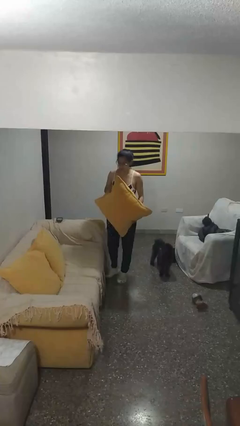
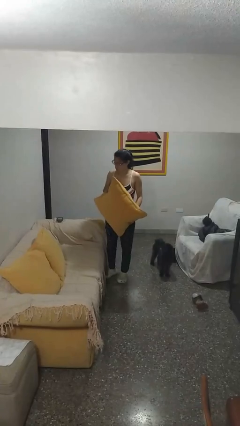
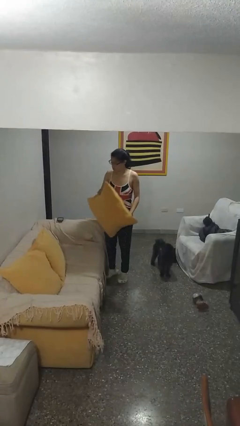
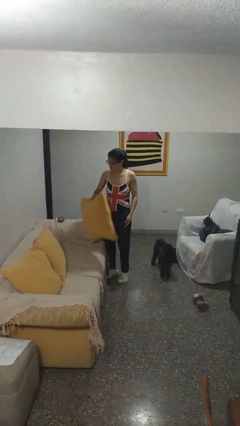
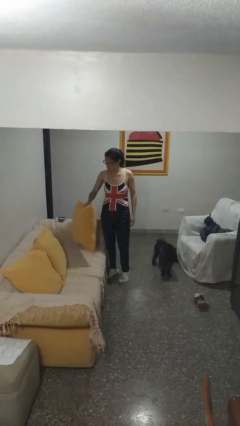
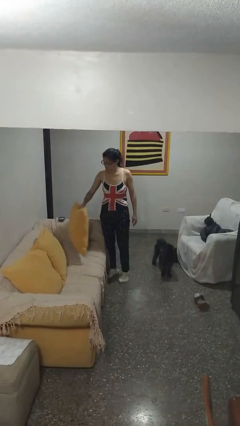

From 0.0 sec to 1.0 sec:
person puts down object on couch

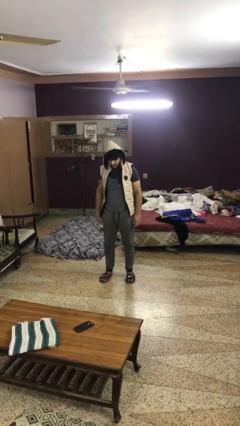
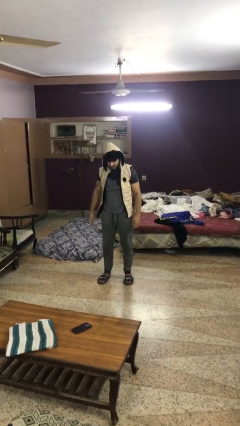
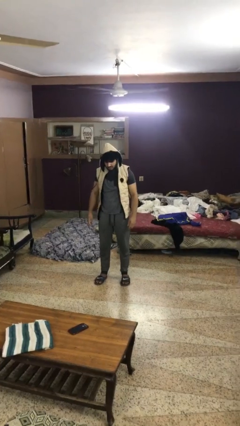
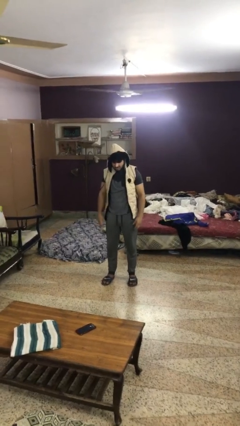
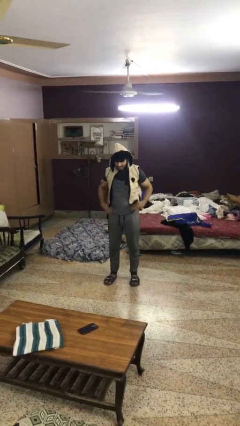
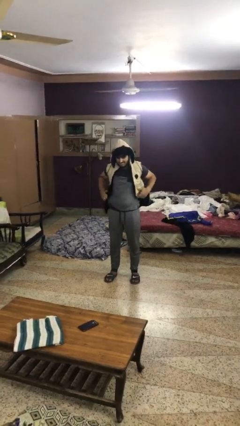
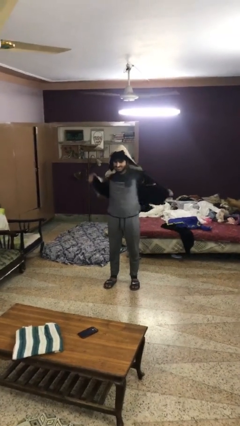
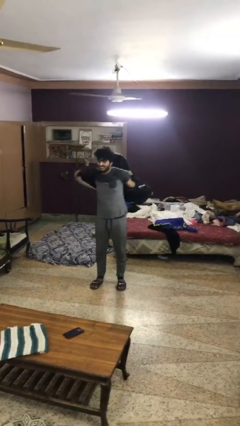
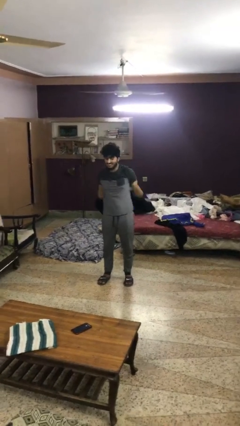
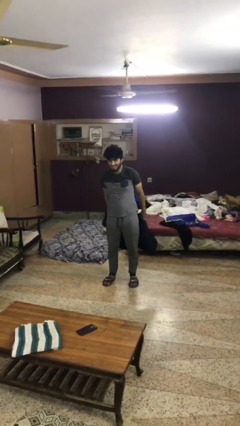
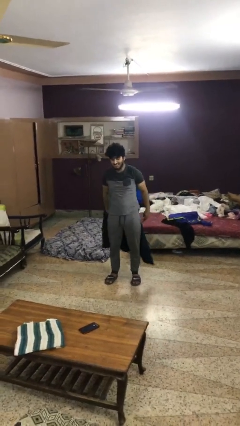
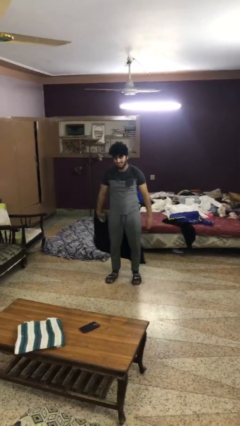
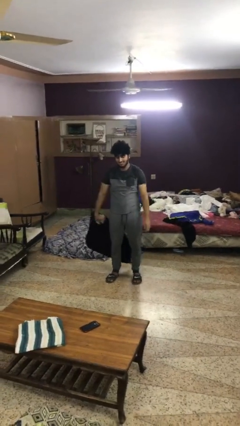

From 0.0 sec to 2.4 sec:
person takes off hoodie

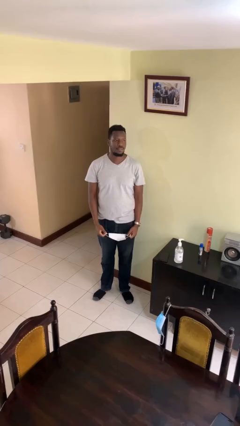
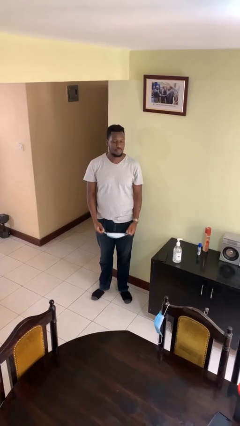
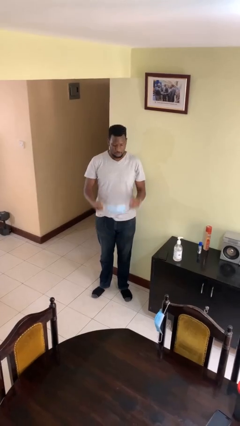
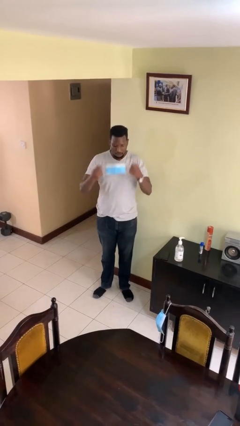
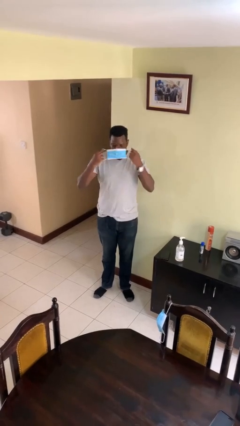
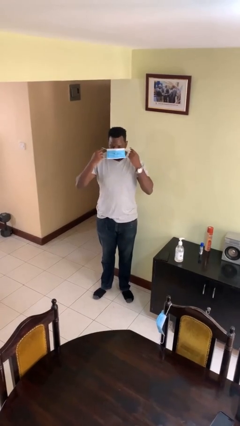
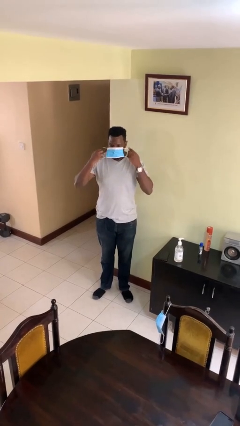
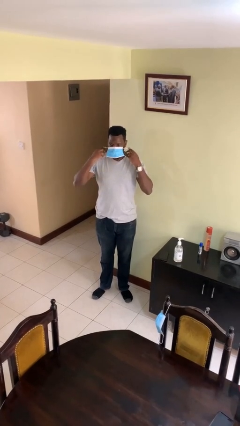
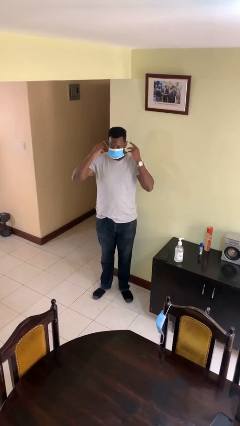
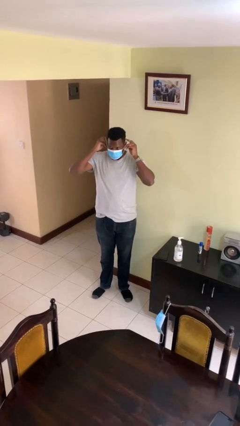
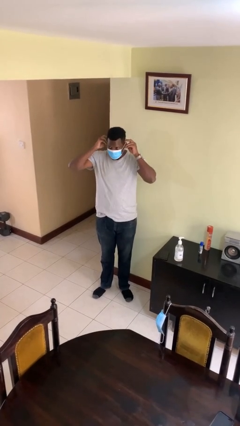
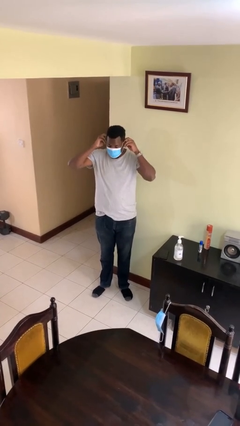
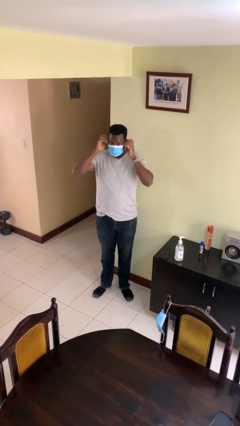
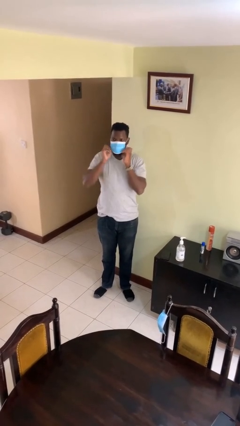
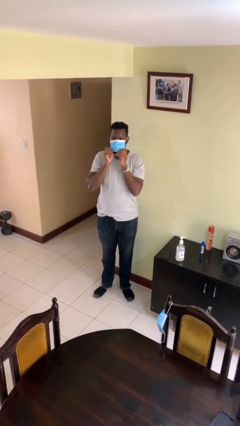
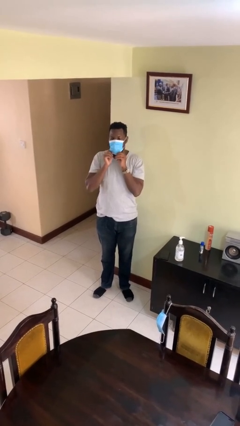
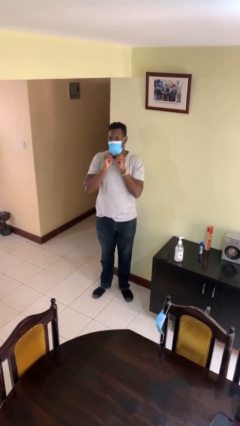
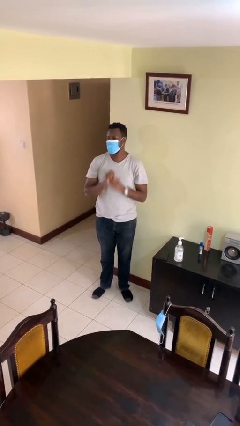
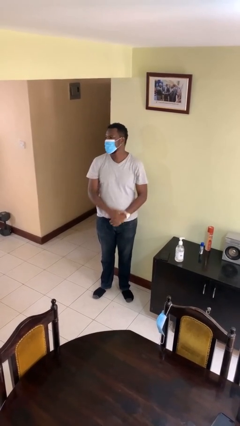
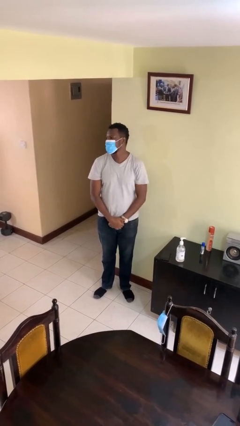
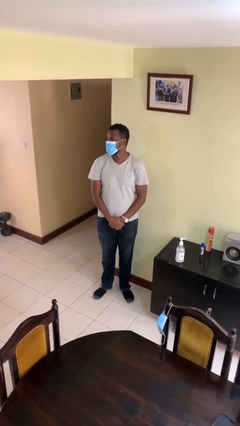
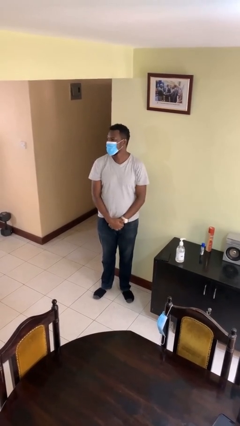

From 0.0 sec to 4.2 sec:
person puts on facemask

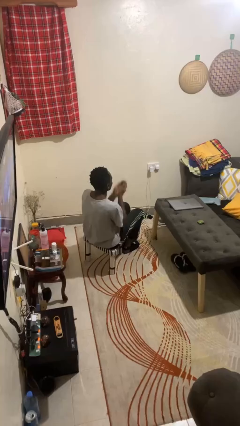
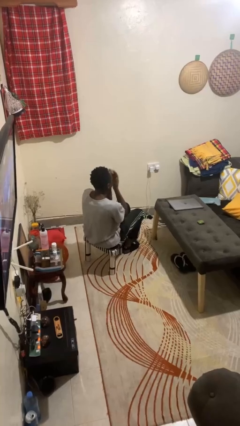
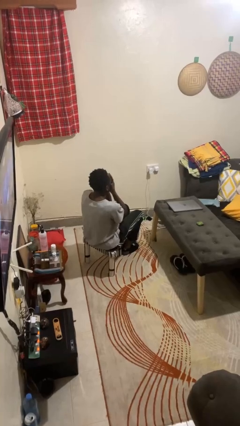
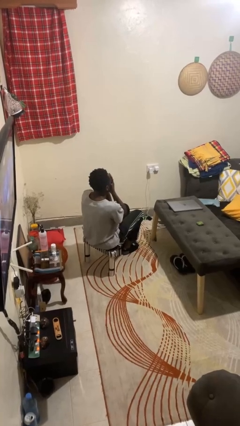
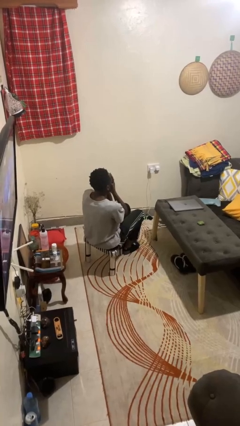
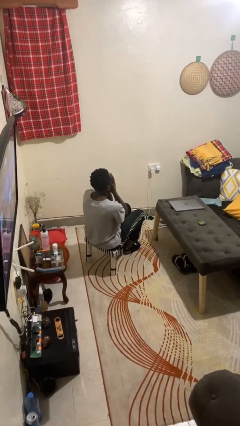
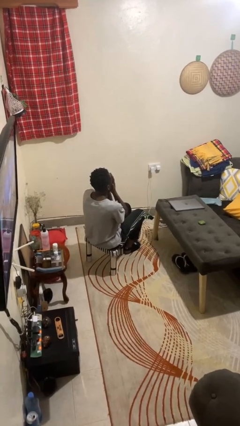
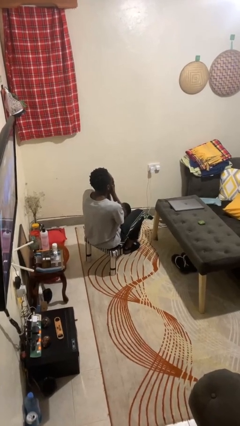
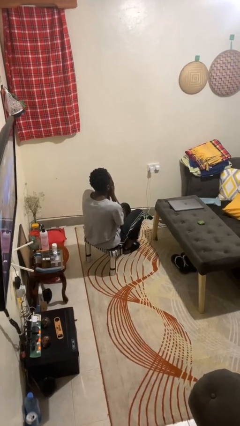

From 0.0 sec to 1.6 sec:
person covers face with hands

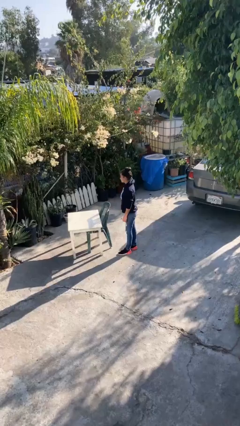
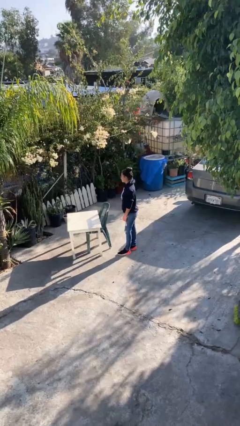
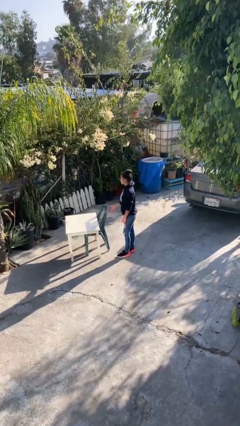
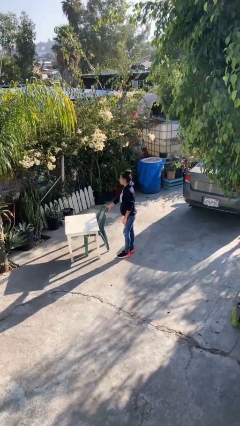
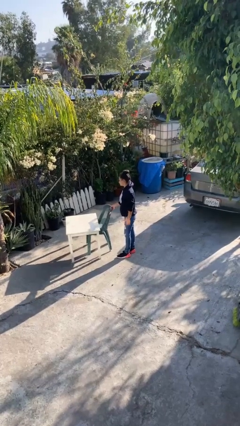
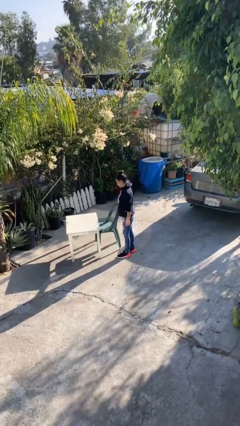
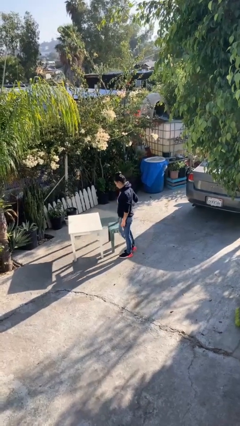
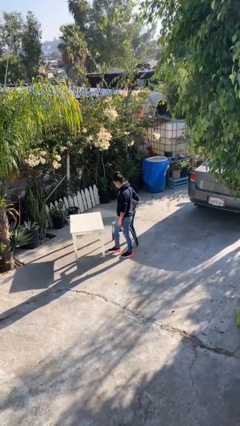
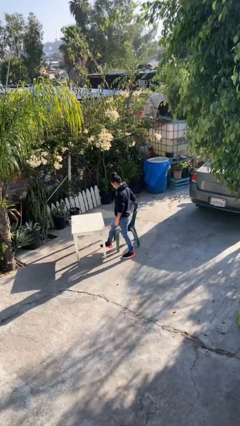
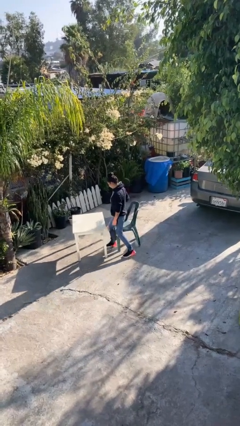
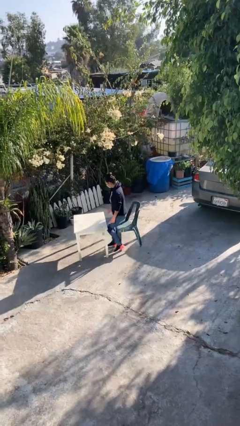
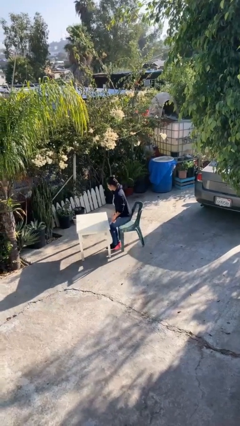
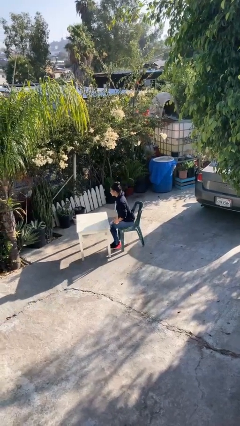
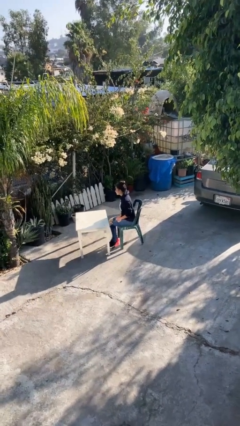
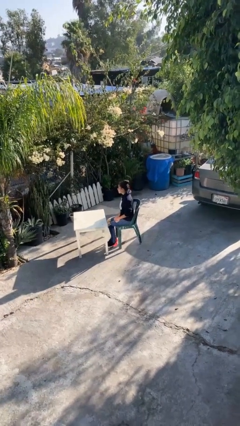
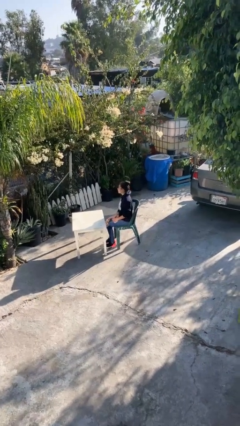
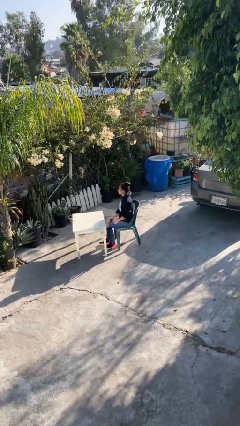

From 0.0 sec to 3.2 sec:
person sits down

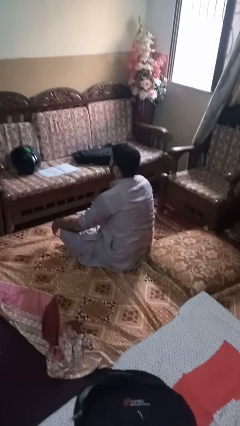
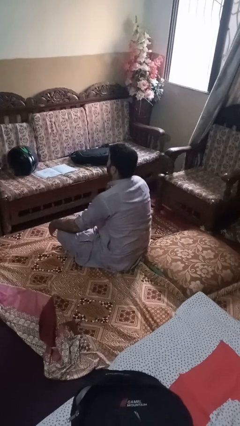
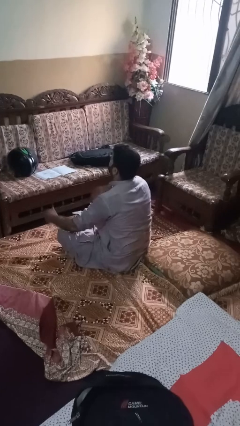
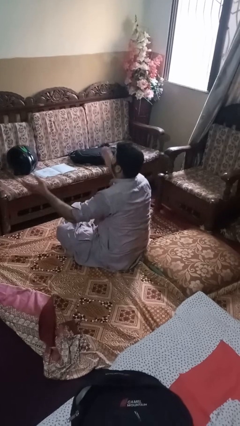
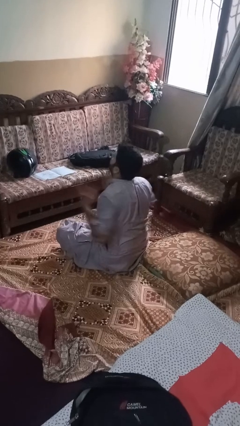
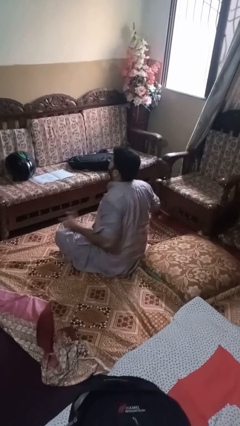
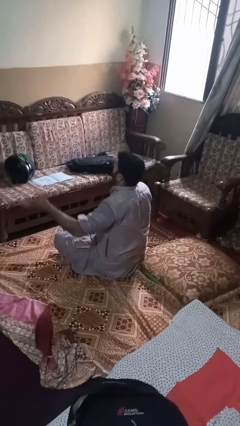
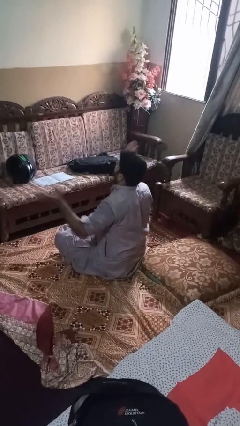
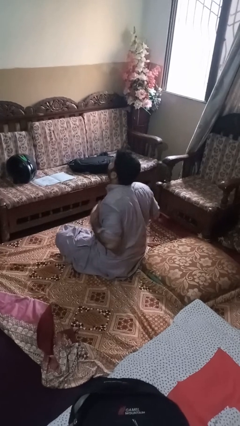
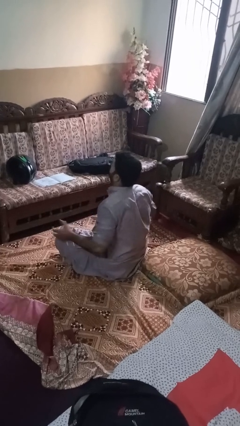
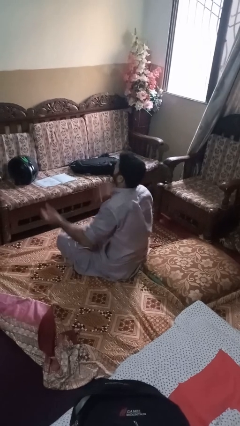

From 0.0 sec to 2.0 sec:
person drums on chest

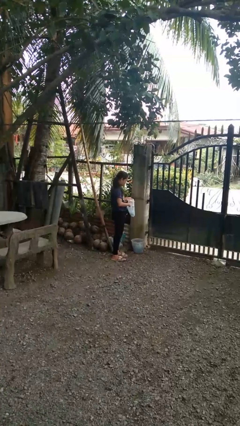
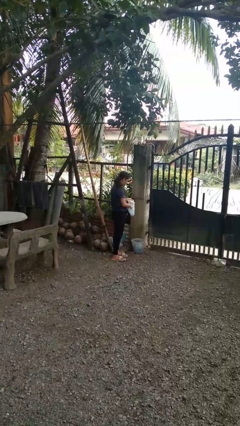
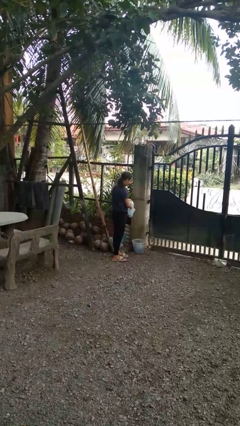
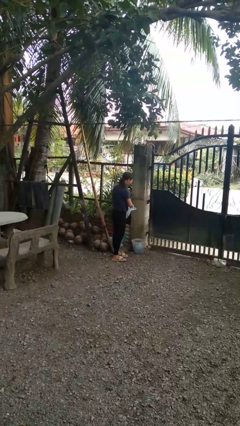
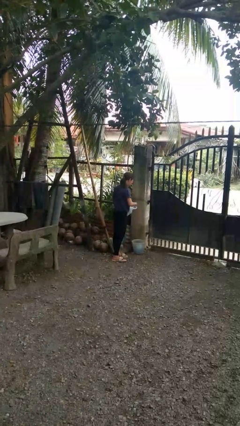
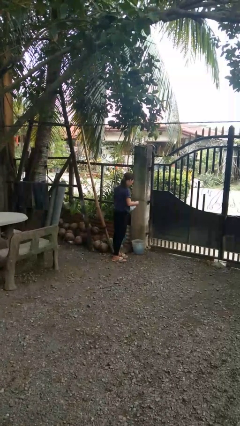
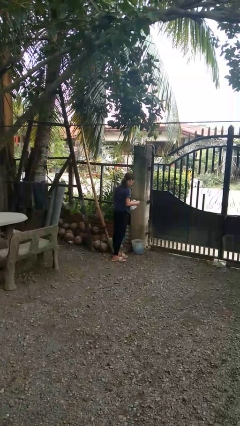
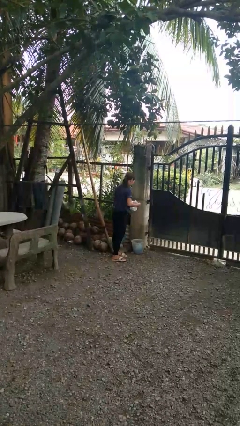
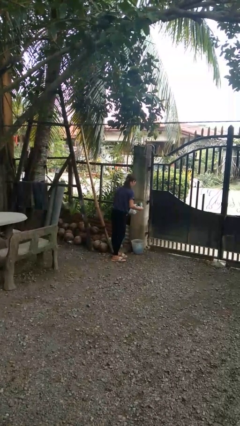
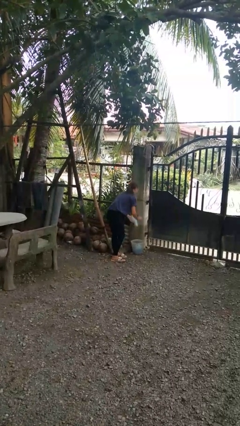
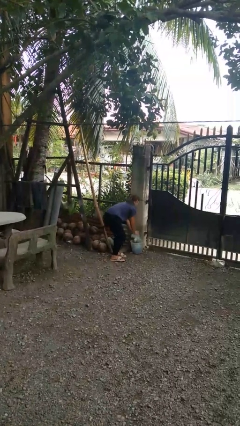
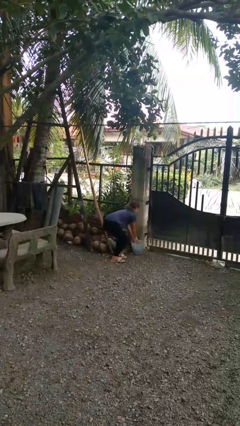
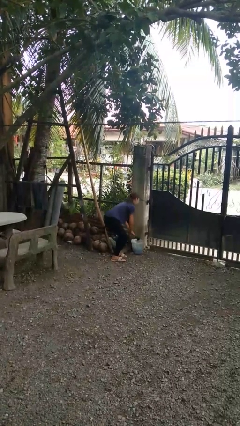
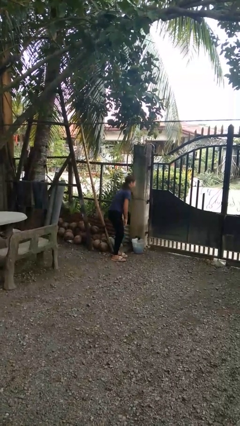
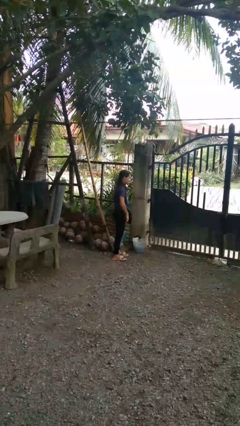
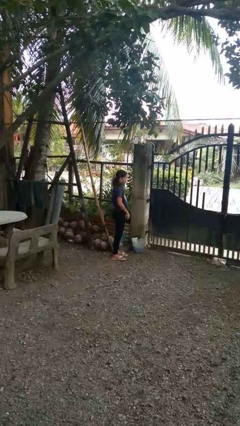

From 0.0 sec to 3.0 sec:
person discards trash
